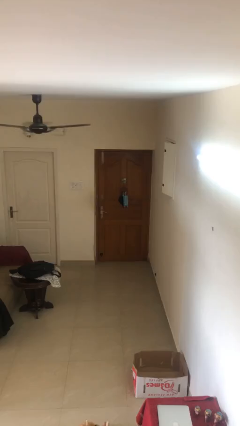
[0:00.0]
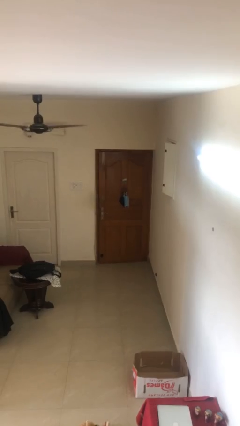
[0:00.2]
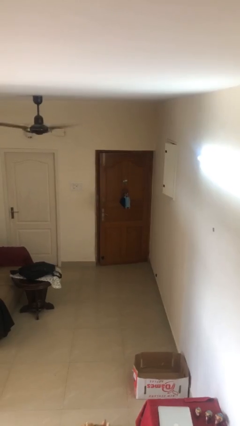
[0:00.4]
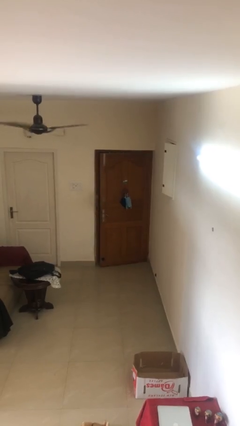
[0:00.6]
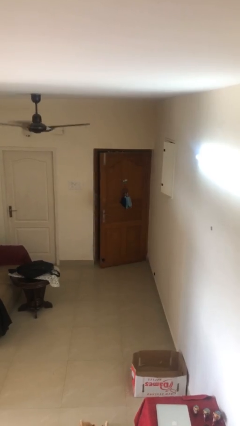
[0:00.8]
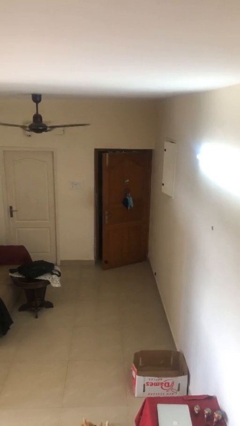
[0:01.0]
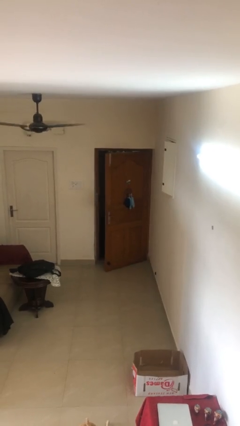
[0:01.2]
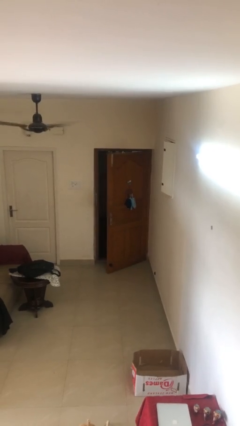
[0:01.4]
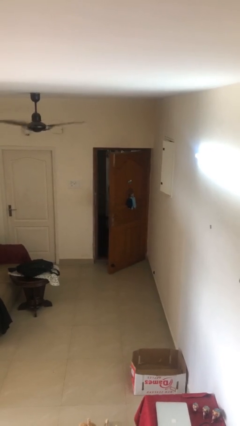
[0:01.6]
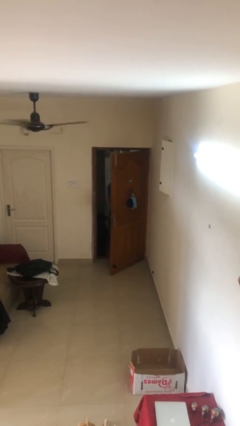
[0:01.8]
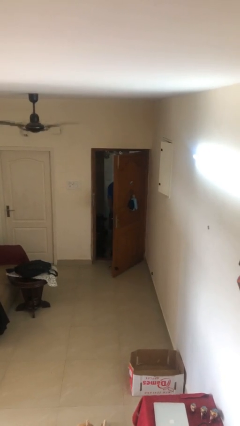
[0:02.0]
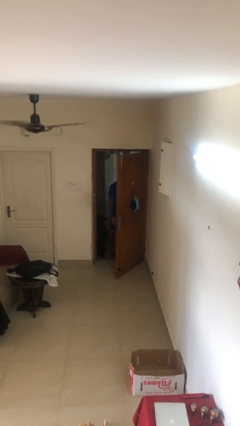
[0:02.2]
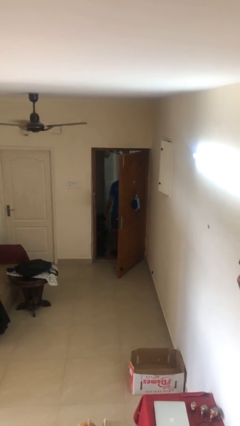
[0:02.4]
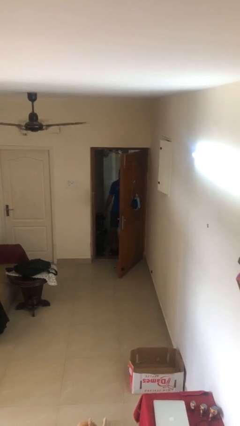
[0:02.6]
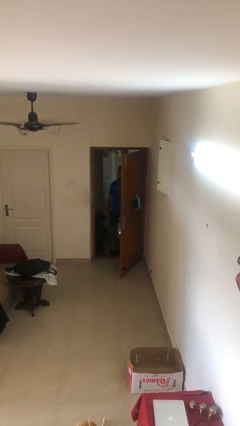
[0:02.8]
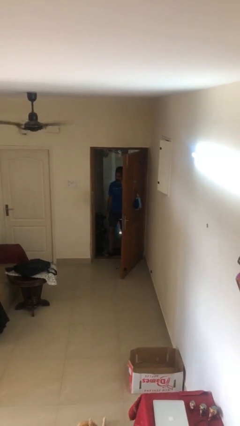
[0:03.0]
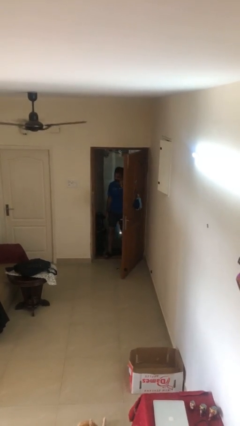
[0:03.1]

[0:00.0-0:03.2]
person opens facility door

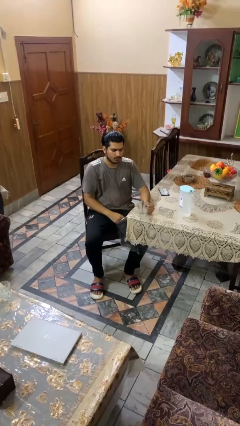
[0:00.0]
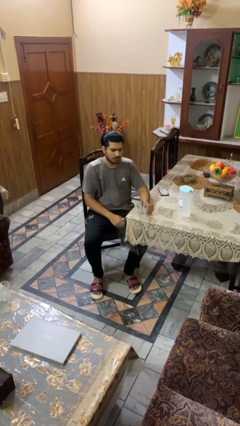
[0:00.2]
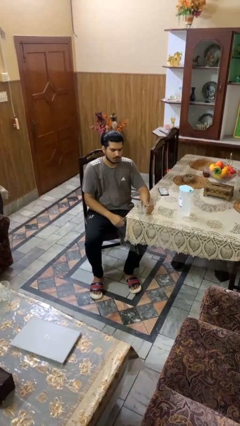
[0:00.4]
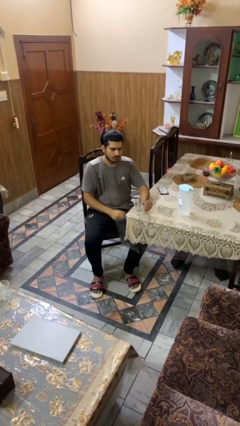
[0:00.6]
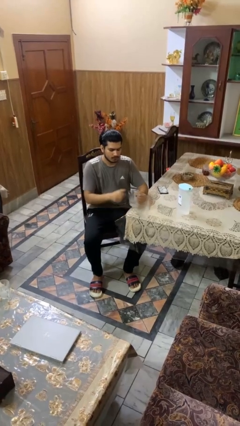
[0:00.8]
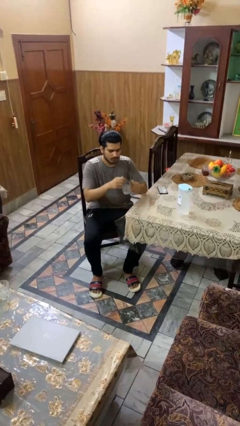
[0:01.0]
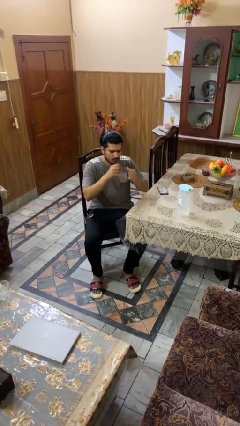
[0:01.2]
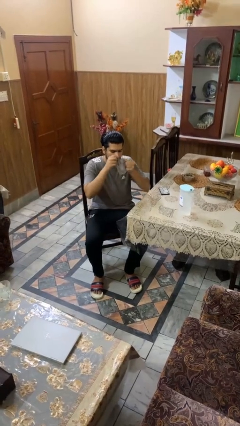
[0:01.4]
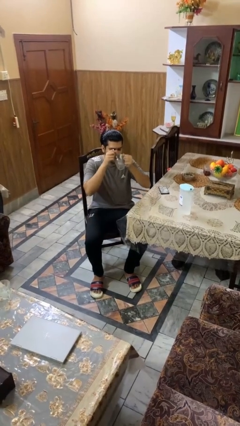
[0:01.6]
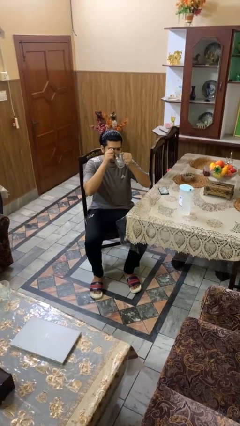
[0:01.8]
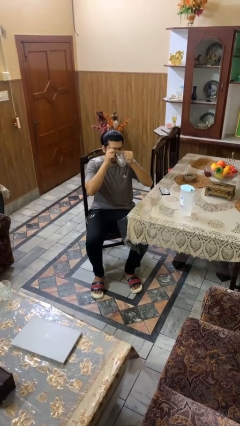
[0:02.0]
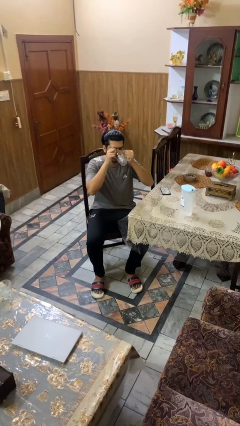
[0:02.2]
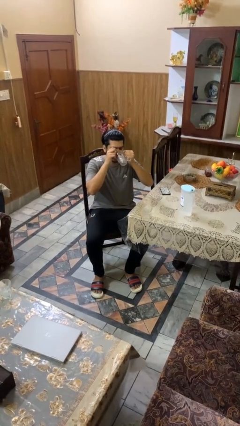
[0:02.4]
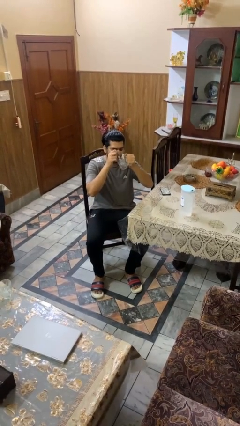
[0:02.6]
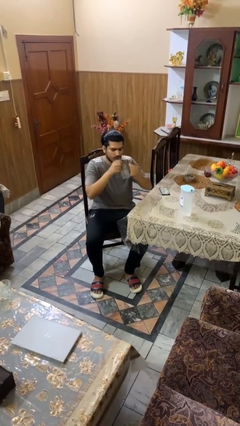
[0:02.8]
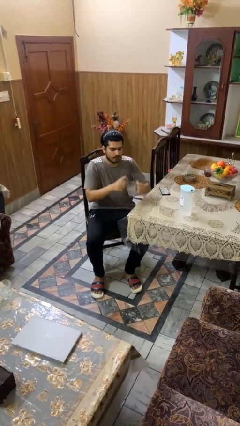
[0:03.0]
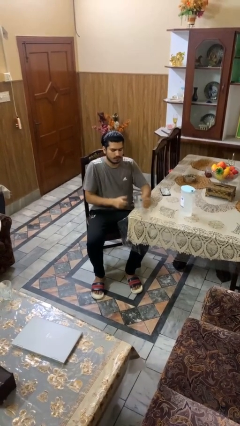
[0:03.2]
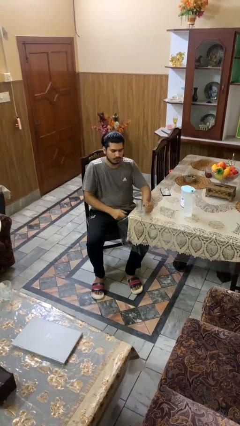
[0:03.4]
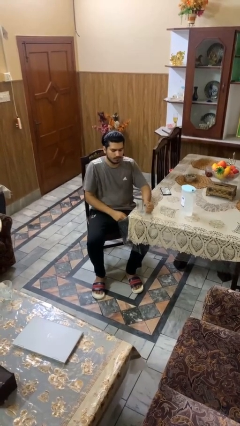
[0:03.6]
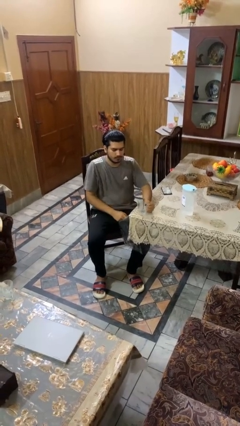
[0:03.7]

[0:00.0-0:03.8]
person drinks from mug

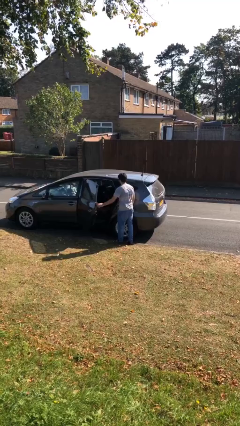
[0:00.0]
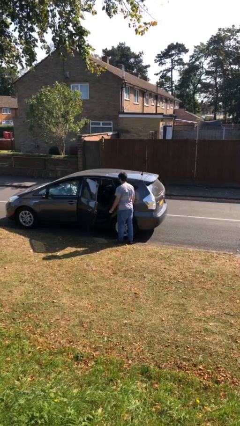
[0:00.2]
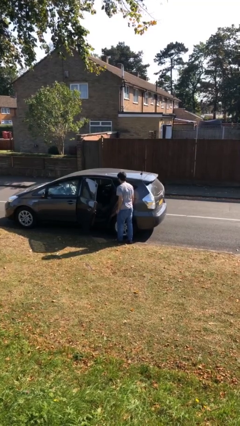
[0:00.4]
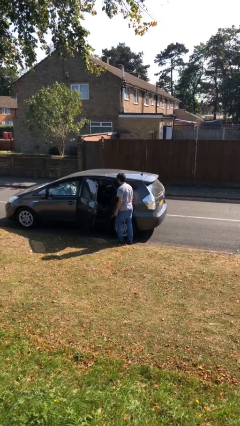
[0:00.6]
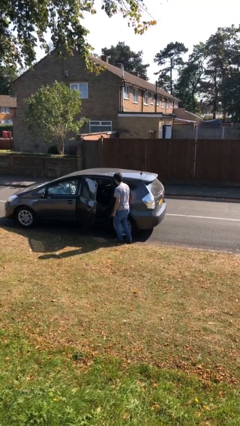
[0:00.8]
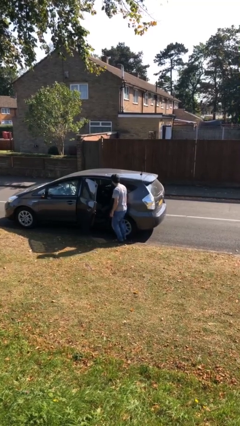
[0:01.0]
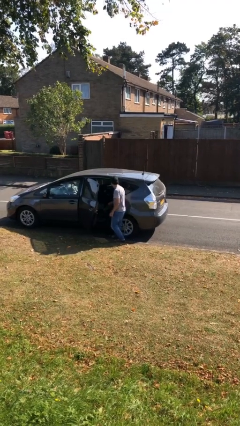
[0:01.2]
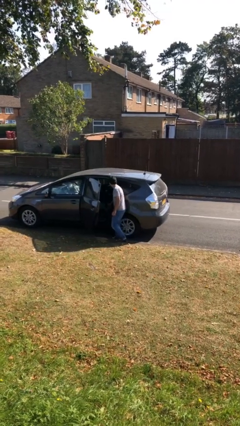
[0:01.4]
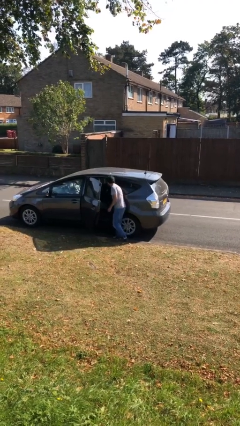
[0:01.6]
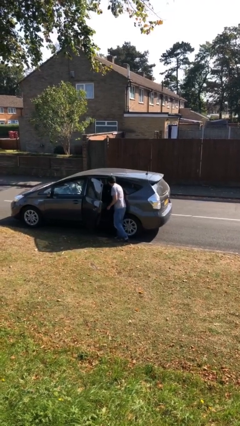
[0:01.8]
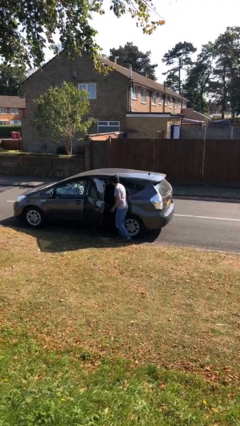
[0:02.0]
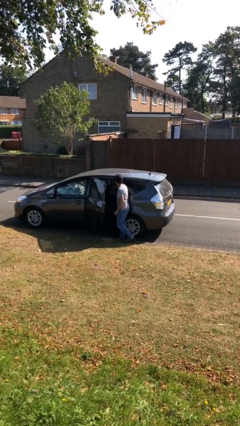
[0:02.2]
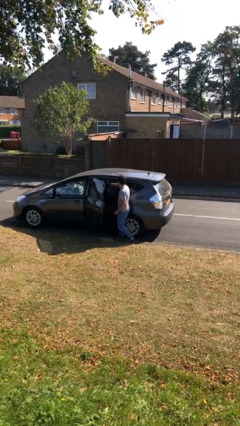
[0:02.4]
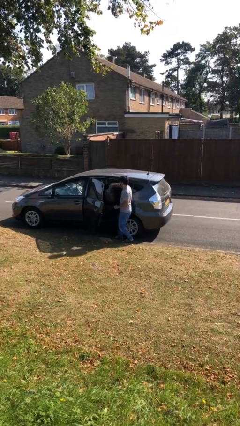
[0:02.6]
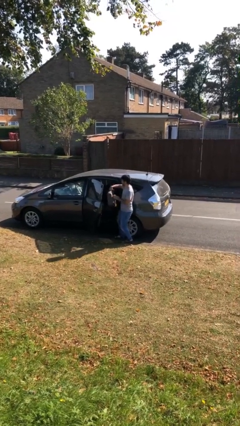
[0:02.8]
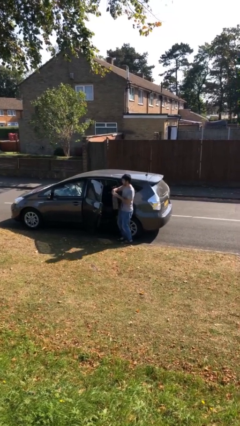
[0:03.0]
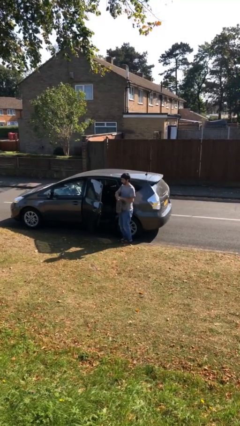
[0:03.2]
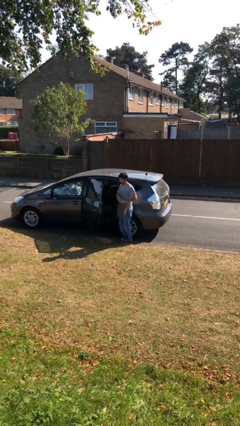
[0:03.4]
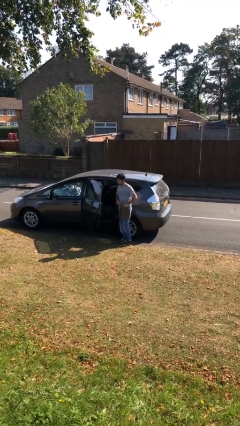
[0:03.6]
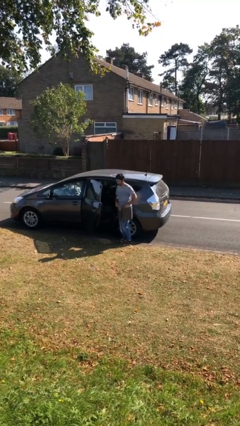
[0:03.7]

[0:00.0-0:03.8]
person unloads car

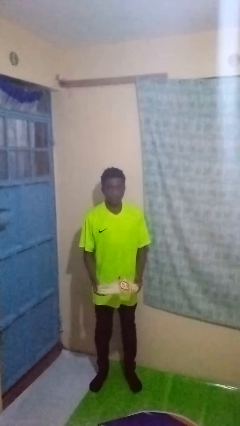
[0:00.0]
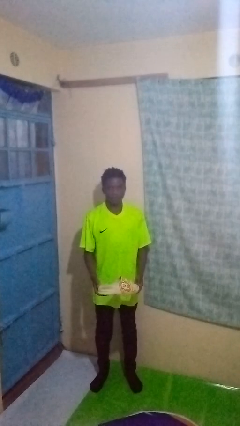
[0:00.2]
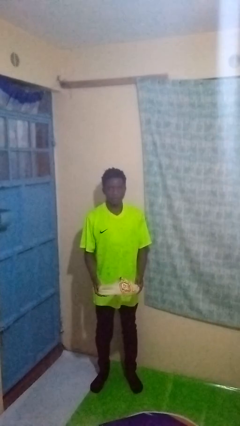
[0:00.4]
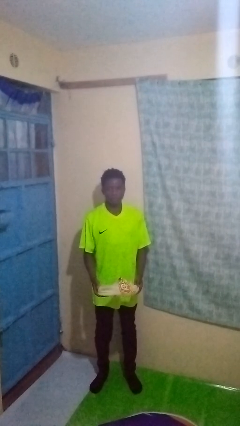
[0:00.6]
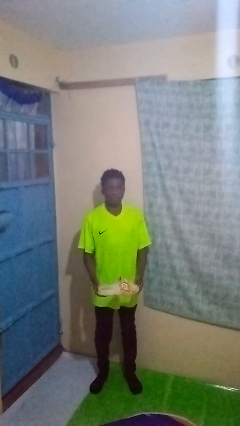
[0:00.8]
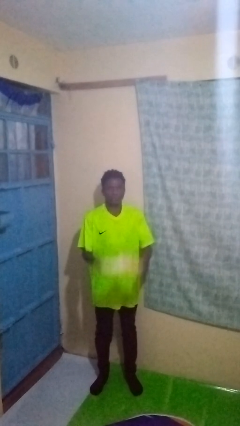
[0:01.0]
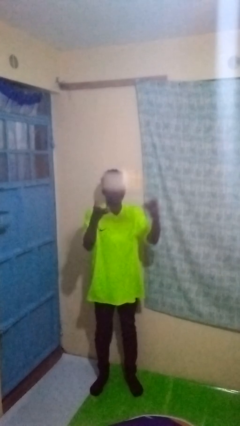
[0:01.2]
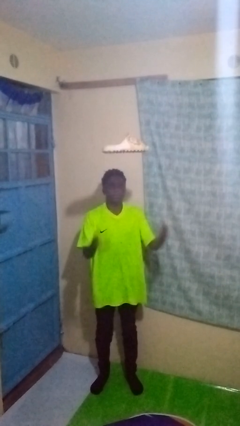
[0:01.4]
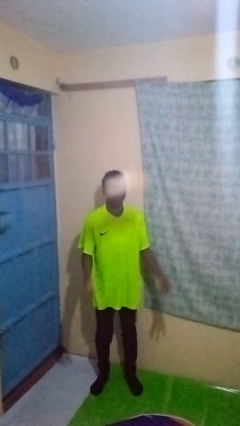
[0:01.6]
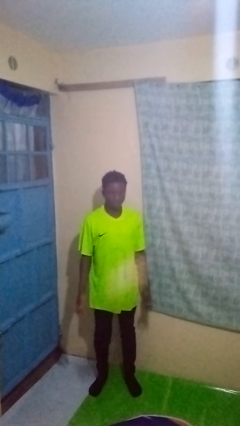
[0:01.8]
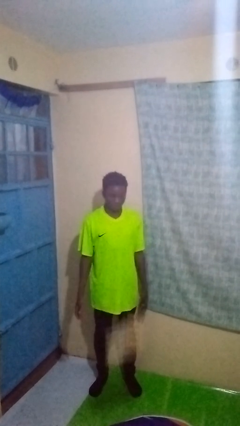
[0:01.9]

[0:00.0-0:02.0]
person throws object into air

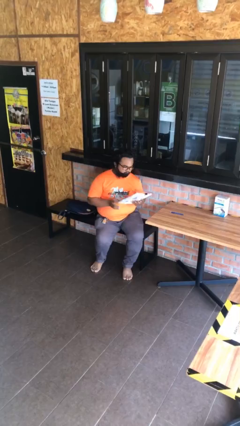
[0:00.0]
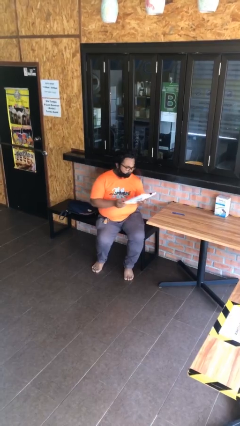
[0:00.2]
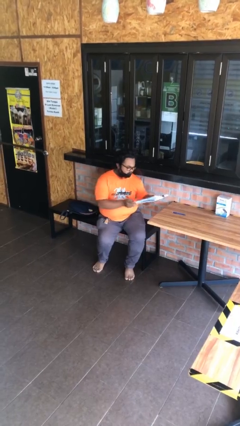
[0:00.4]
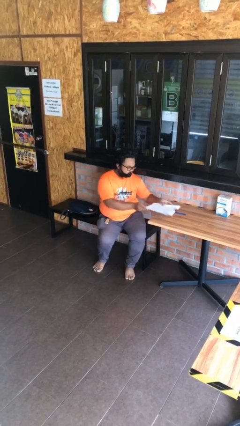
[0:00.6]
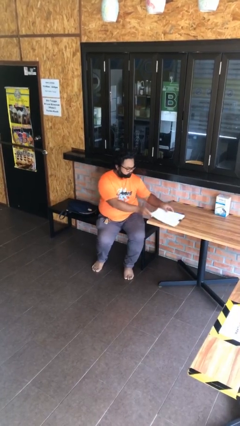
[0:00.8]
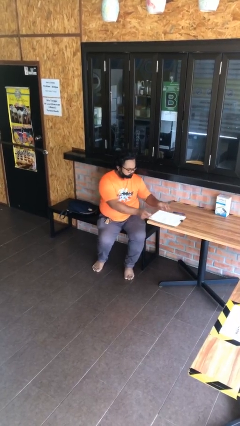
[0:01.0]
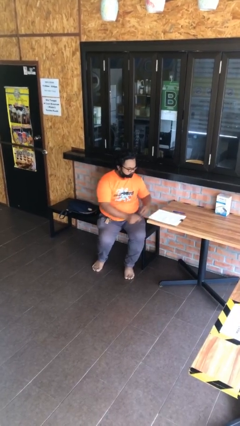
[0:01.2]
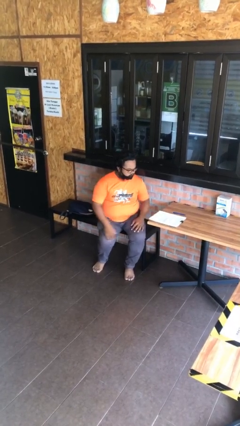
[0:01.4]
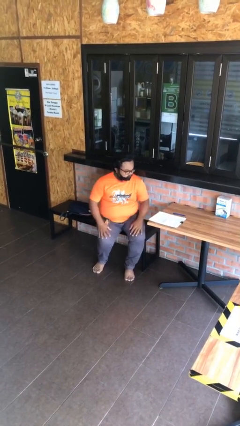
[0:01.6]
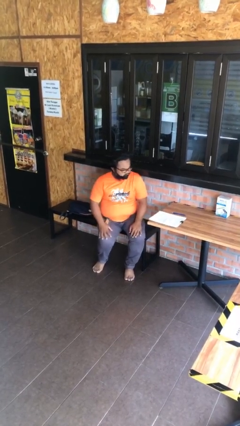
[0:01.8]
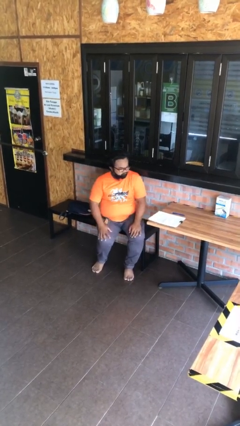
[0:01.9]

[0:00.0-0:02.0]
person puts down object on table

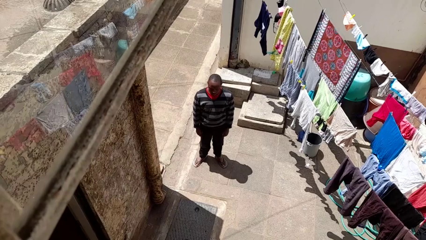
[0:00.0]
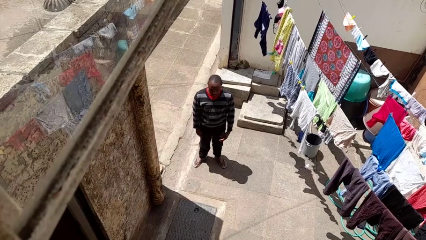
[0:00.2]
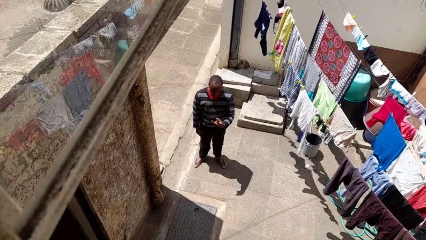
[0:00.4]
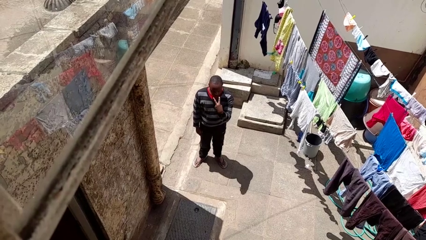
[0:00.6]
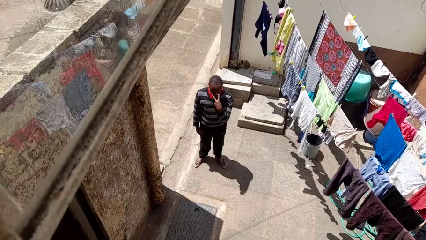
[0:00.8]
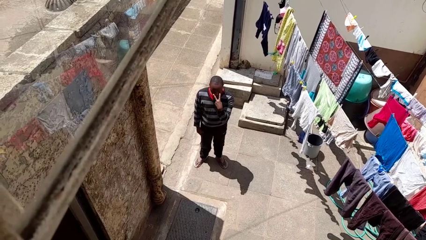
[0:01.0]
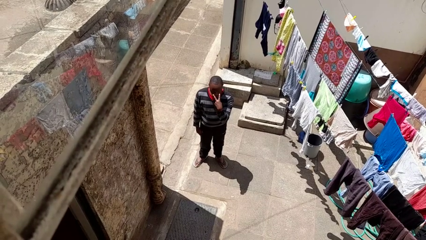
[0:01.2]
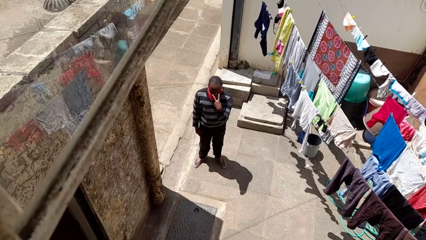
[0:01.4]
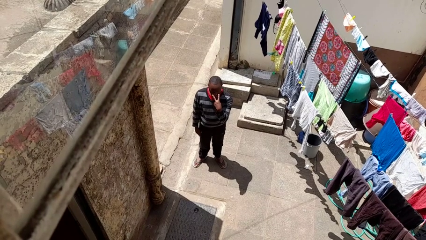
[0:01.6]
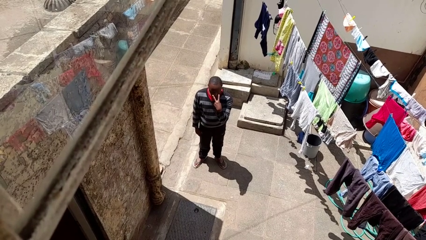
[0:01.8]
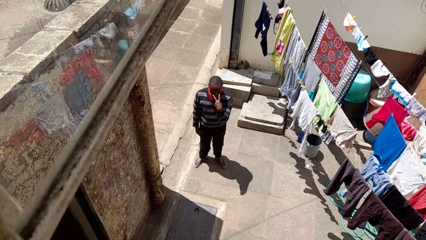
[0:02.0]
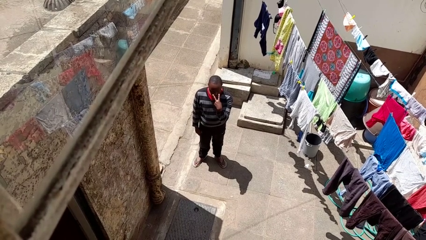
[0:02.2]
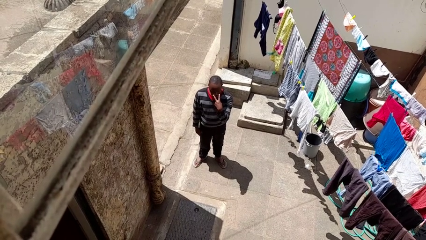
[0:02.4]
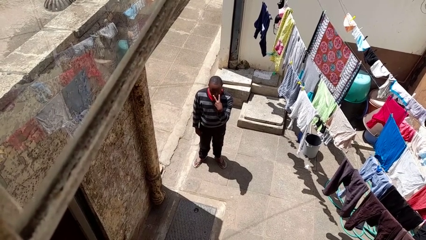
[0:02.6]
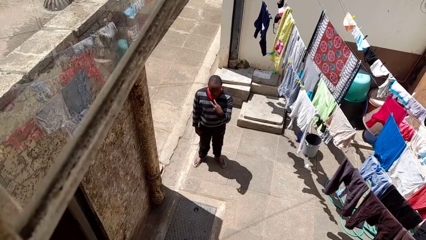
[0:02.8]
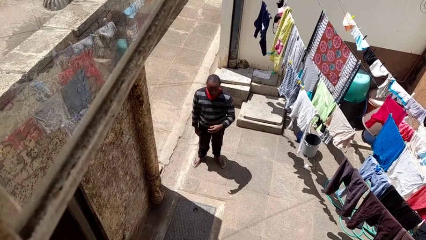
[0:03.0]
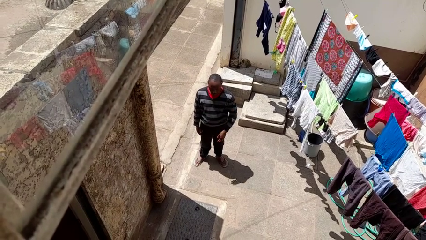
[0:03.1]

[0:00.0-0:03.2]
person gestures watch closely
